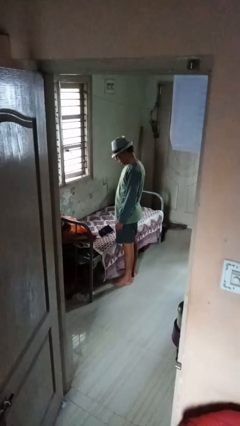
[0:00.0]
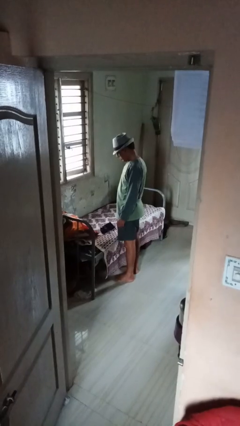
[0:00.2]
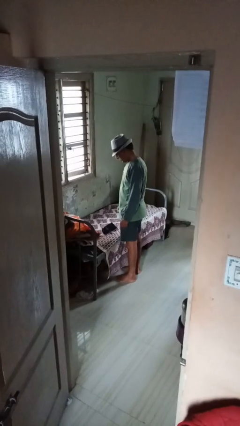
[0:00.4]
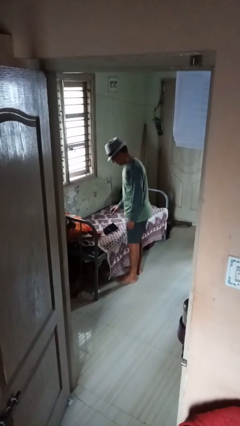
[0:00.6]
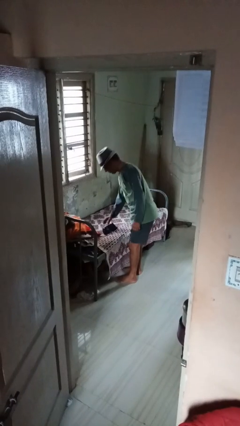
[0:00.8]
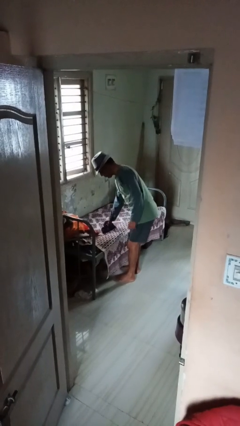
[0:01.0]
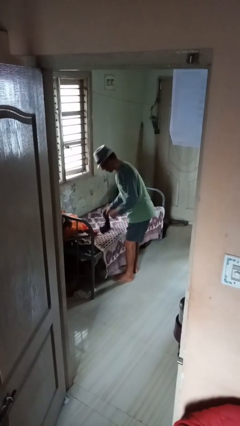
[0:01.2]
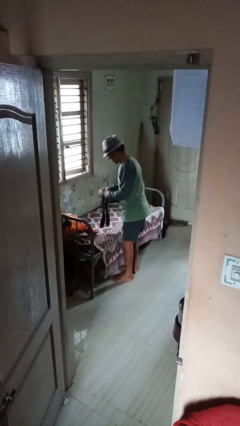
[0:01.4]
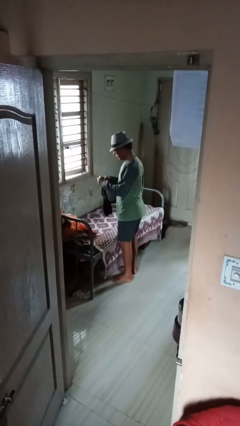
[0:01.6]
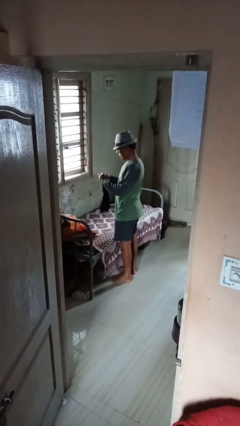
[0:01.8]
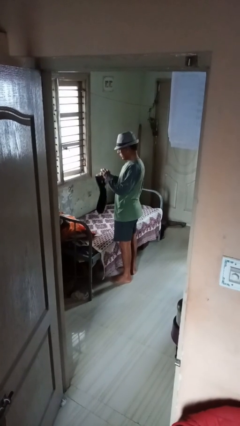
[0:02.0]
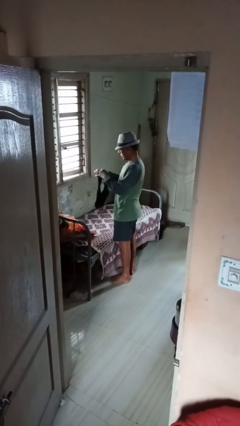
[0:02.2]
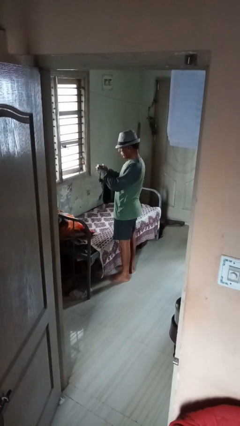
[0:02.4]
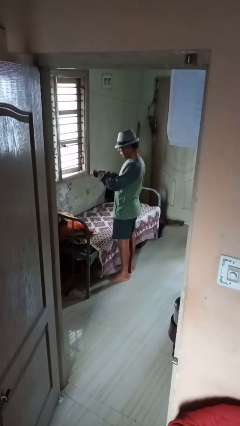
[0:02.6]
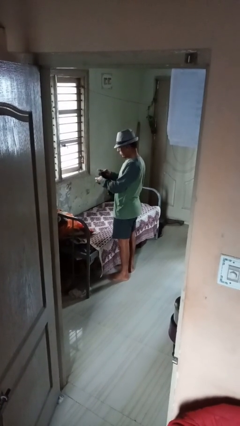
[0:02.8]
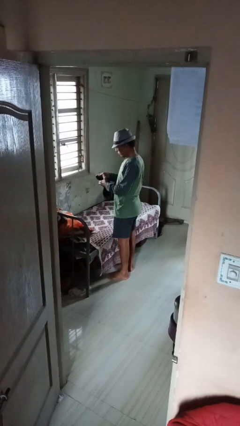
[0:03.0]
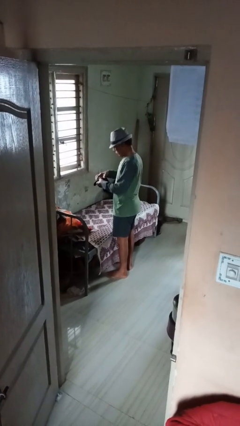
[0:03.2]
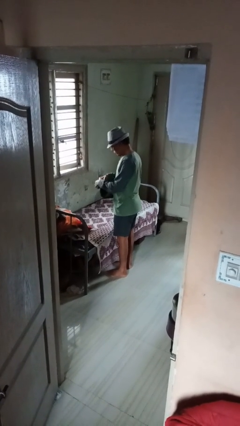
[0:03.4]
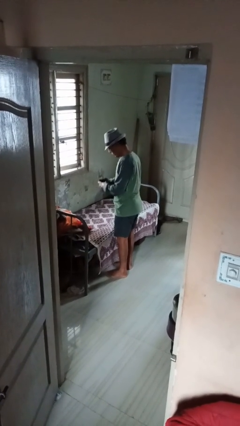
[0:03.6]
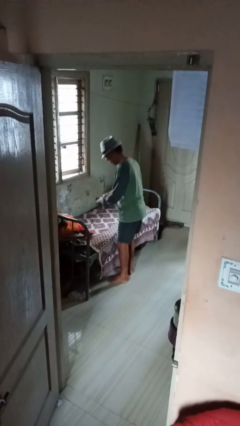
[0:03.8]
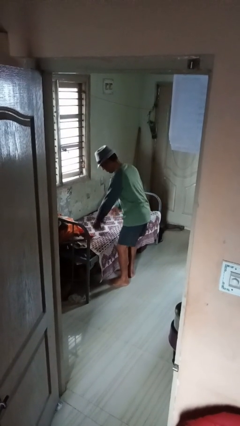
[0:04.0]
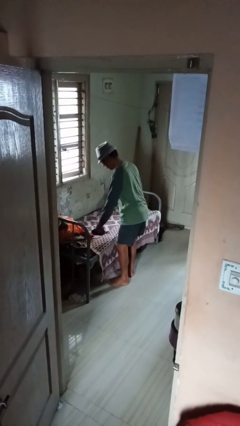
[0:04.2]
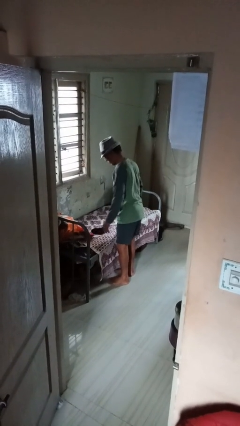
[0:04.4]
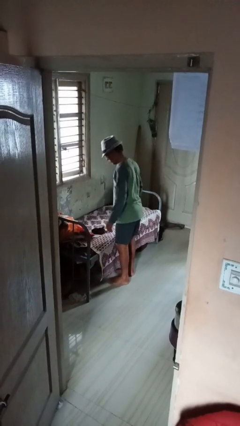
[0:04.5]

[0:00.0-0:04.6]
person folds socks

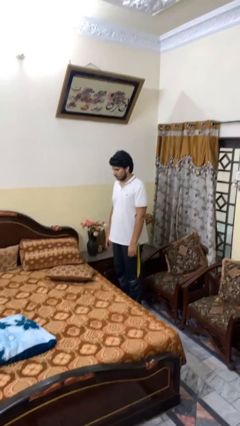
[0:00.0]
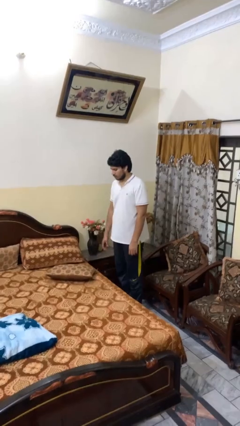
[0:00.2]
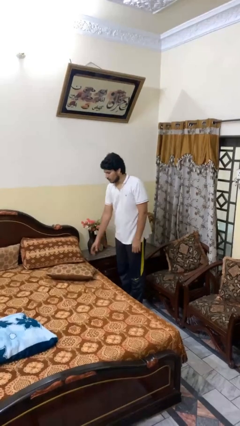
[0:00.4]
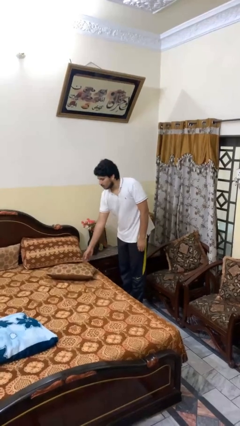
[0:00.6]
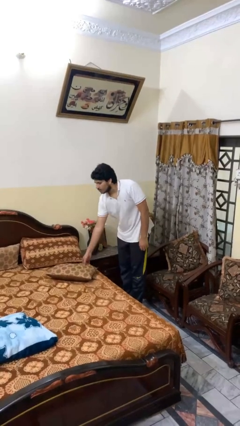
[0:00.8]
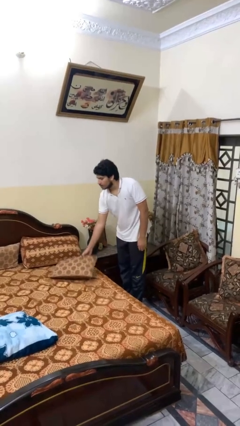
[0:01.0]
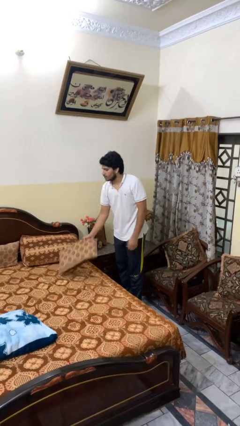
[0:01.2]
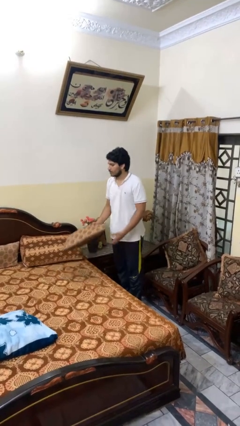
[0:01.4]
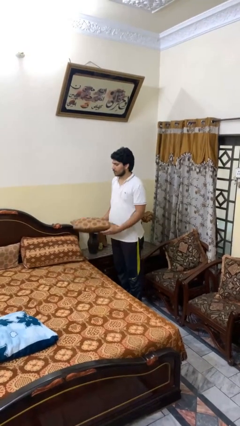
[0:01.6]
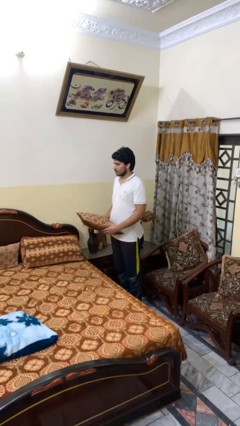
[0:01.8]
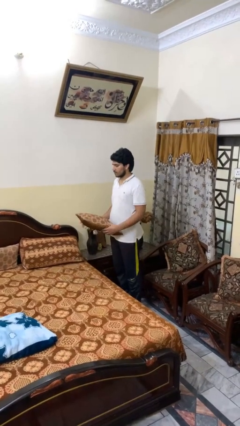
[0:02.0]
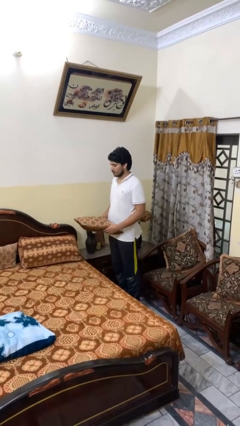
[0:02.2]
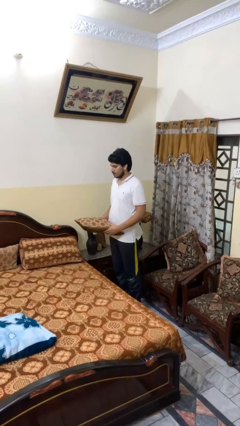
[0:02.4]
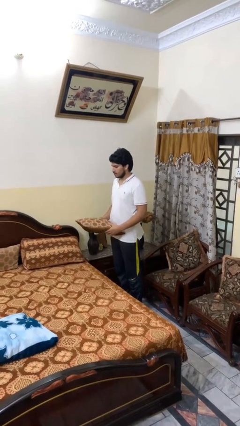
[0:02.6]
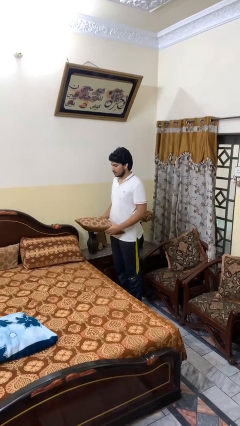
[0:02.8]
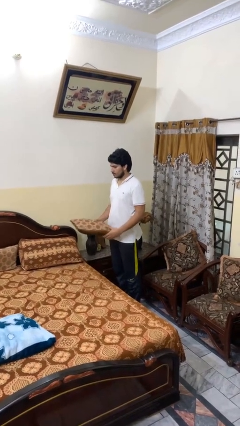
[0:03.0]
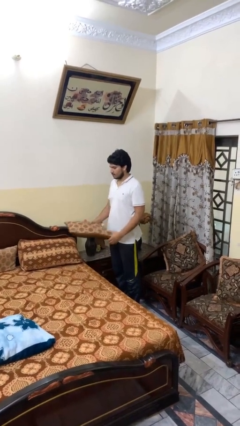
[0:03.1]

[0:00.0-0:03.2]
person picks up object from bed

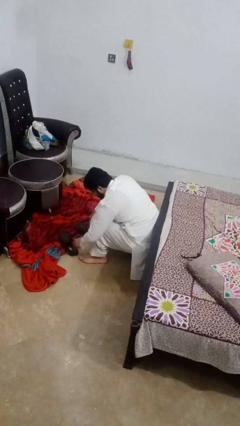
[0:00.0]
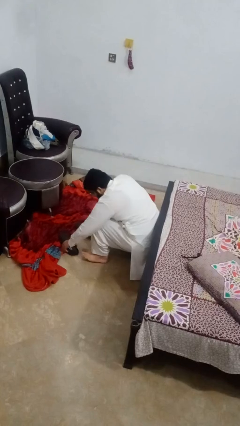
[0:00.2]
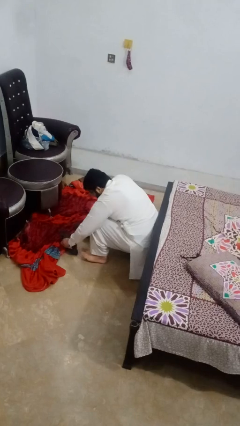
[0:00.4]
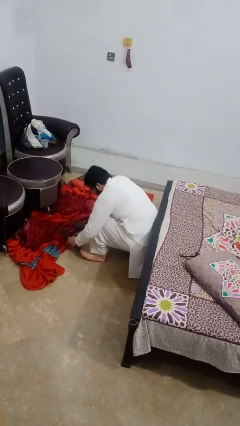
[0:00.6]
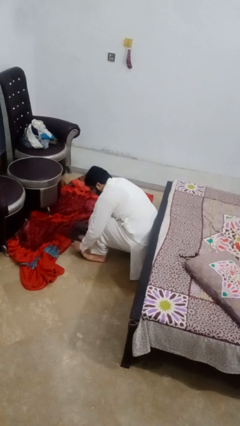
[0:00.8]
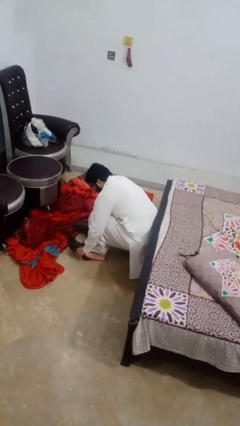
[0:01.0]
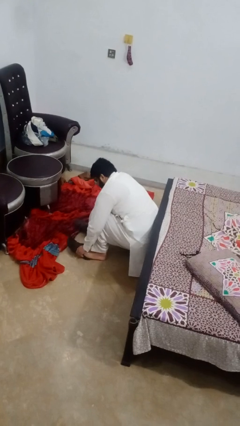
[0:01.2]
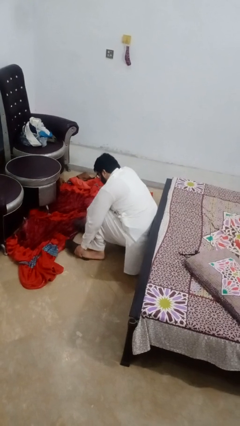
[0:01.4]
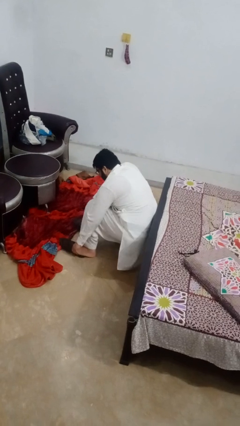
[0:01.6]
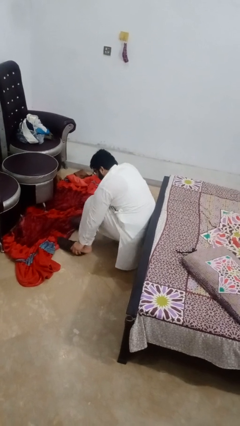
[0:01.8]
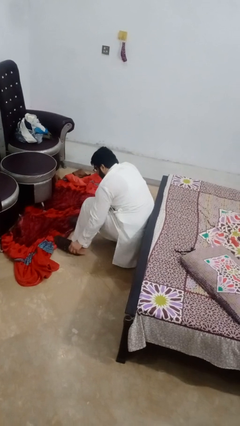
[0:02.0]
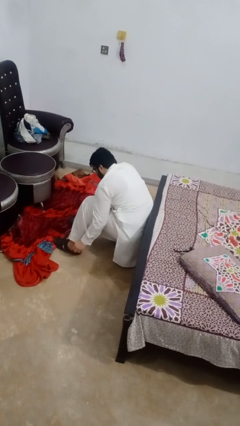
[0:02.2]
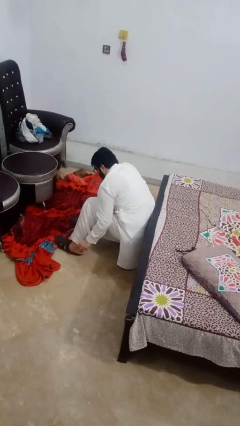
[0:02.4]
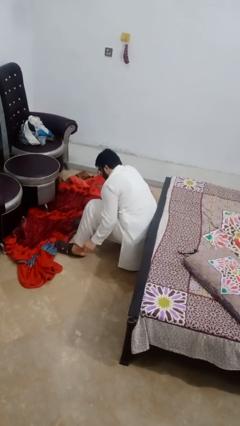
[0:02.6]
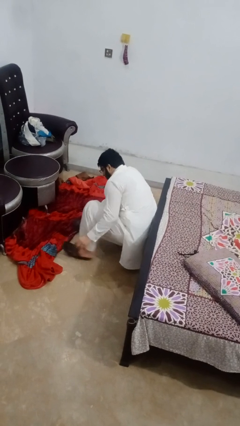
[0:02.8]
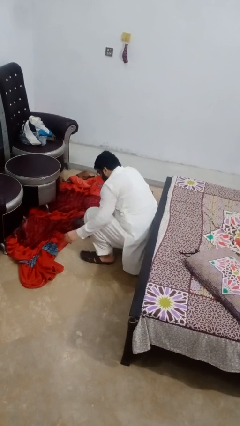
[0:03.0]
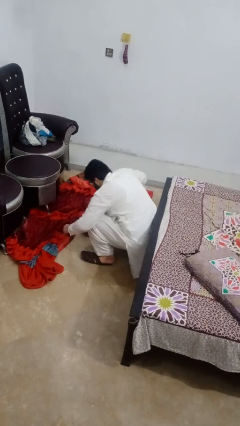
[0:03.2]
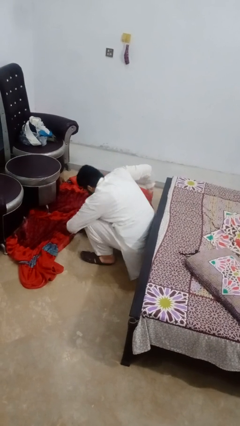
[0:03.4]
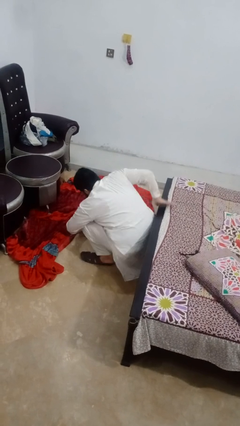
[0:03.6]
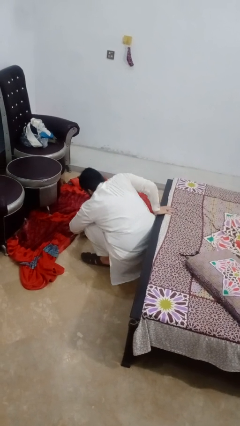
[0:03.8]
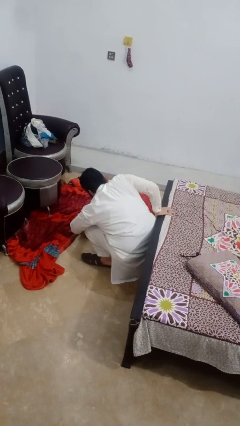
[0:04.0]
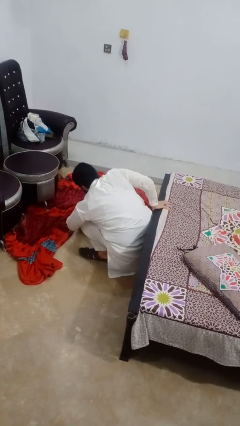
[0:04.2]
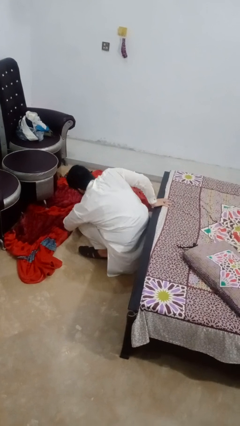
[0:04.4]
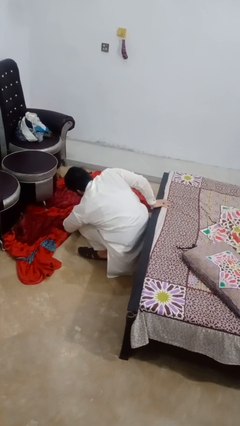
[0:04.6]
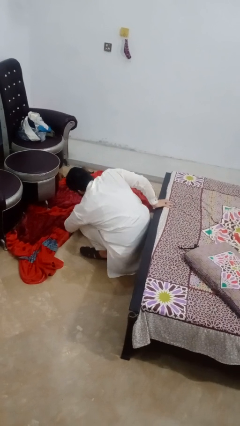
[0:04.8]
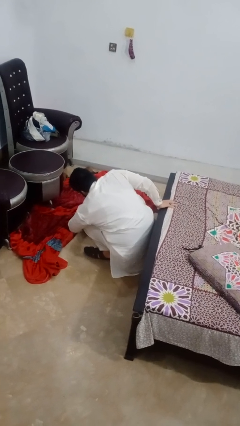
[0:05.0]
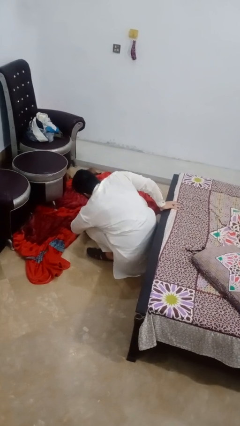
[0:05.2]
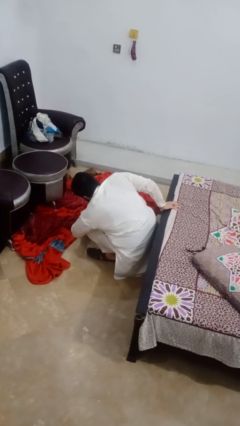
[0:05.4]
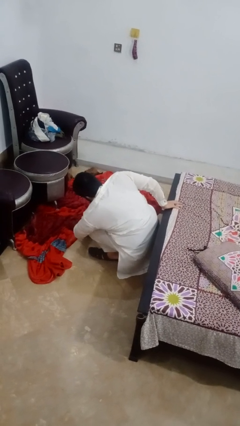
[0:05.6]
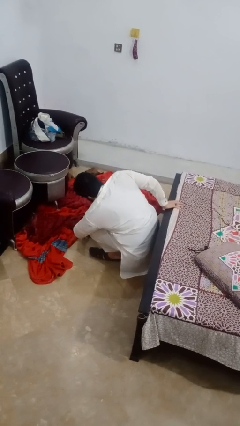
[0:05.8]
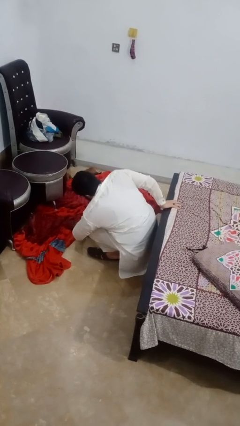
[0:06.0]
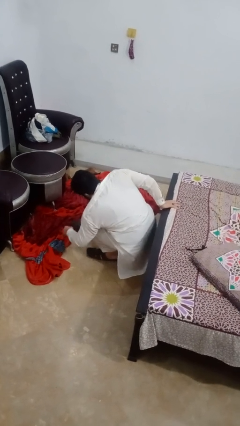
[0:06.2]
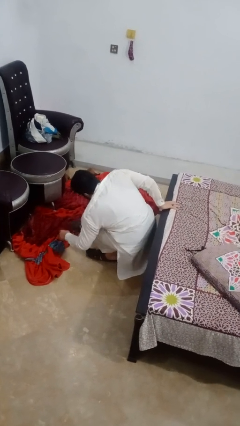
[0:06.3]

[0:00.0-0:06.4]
person puts on shoes

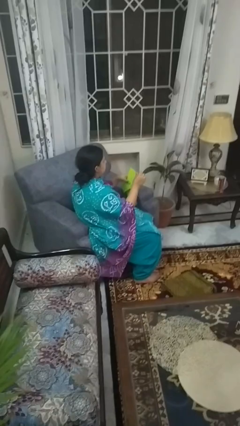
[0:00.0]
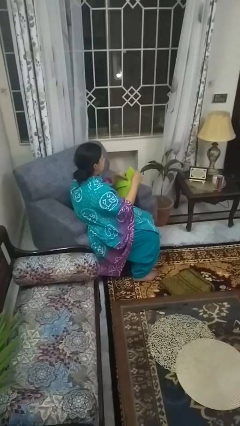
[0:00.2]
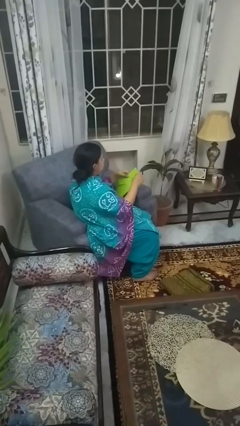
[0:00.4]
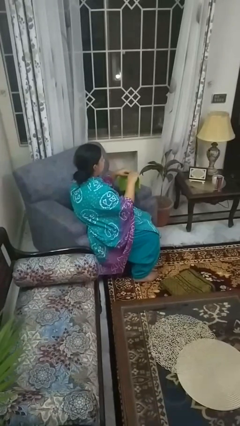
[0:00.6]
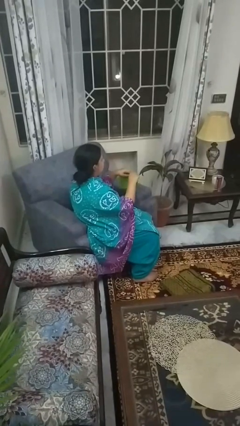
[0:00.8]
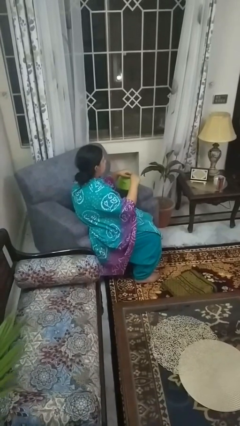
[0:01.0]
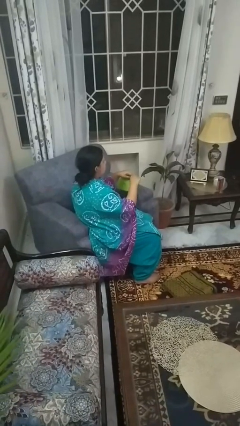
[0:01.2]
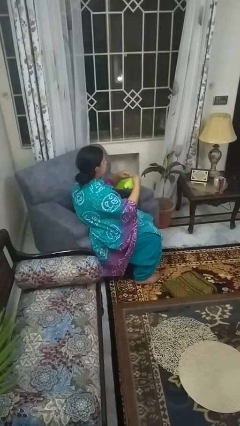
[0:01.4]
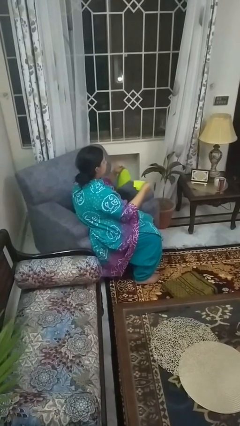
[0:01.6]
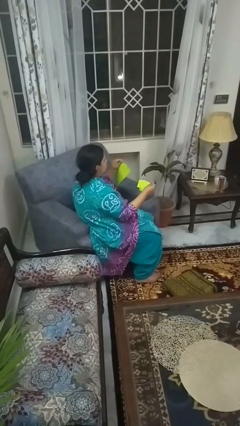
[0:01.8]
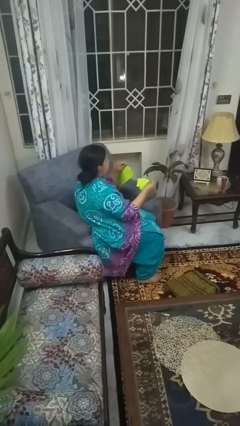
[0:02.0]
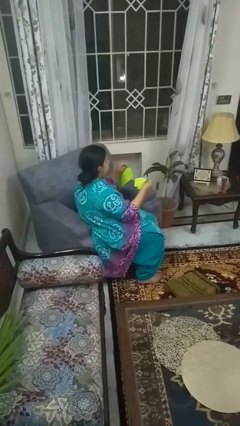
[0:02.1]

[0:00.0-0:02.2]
person tears paper

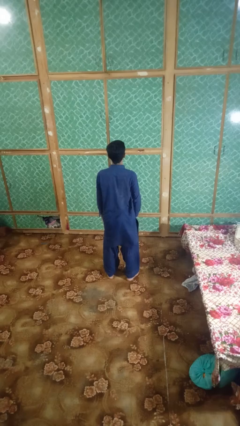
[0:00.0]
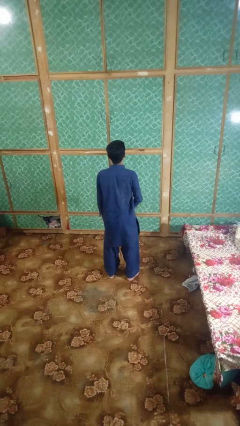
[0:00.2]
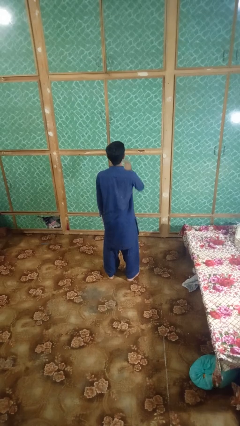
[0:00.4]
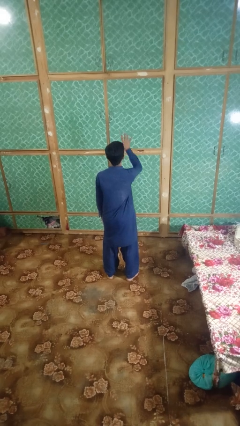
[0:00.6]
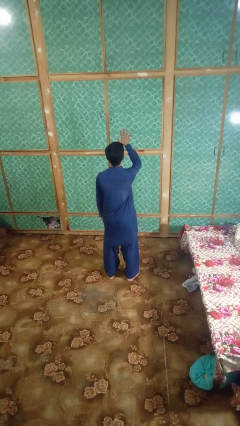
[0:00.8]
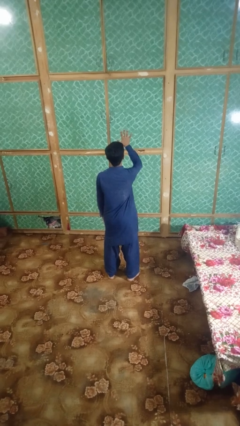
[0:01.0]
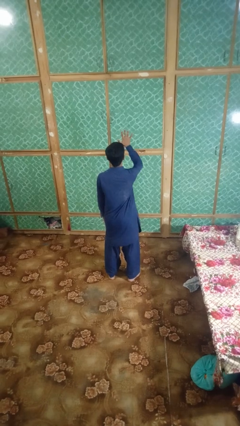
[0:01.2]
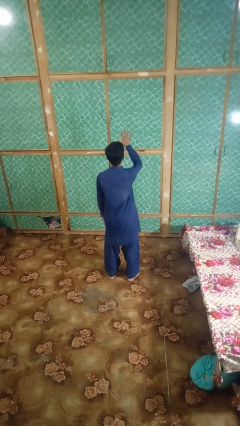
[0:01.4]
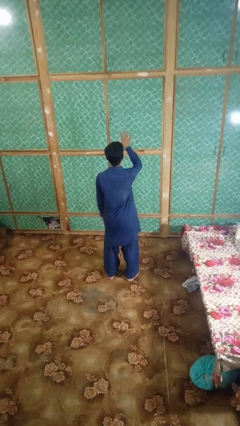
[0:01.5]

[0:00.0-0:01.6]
person gestures number five
